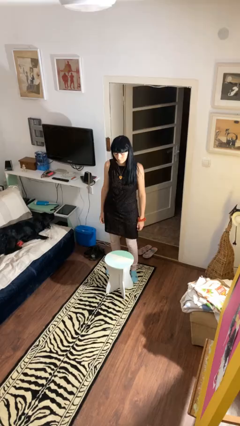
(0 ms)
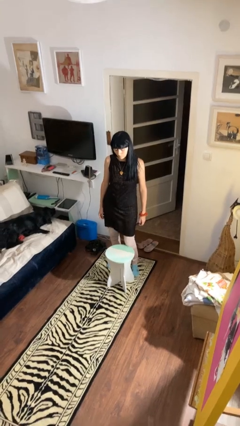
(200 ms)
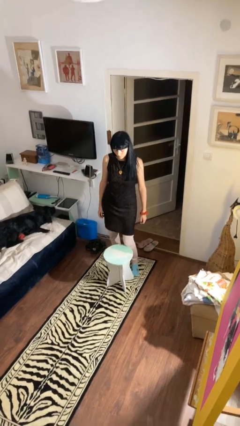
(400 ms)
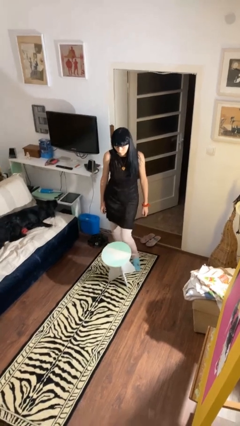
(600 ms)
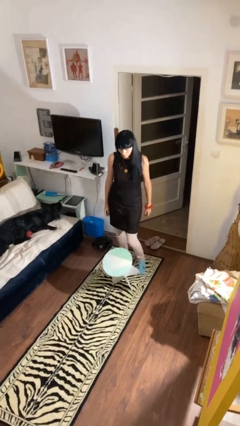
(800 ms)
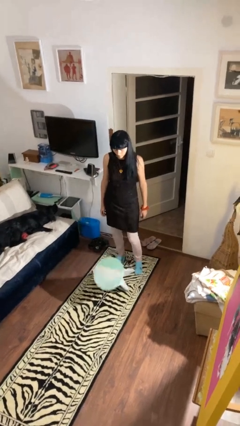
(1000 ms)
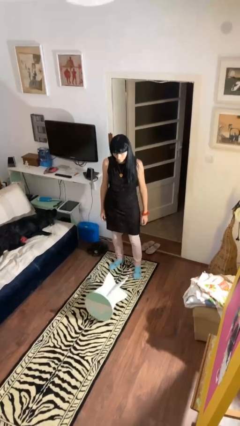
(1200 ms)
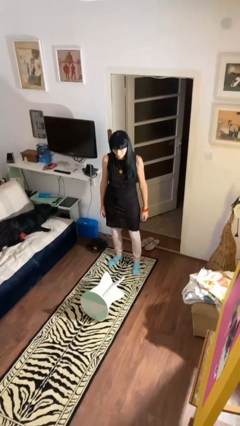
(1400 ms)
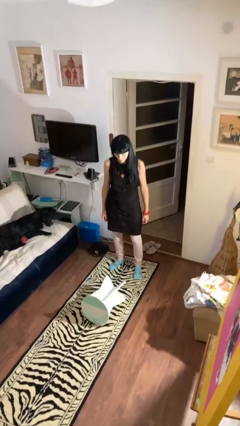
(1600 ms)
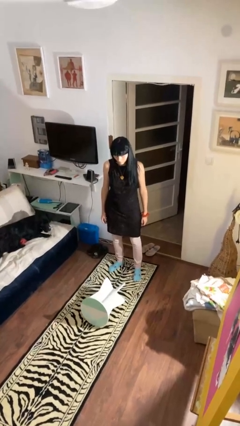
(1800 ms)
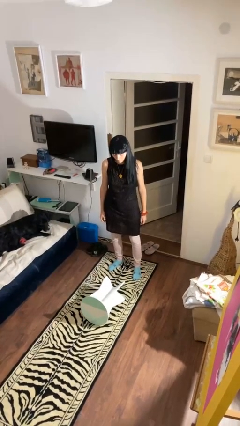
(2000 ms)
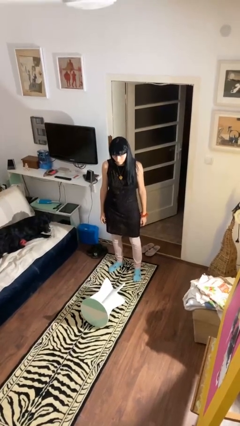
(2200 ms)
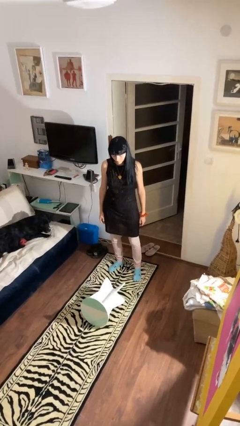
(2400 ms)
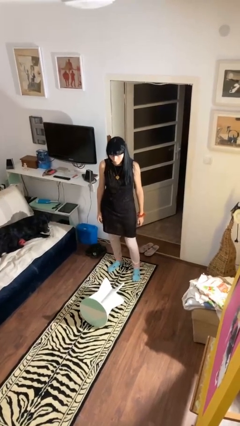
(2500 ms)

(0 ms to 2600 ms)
person knocks over furniture

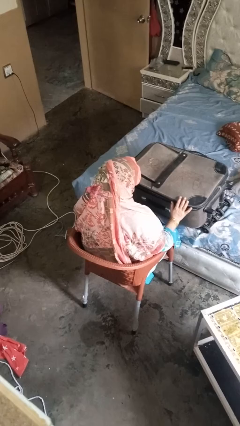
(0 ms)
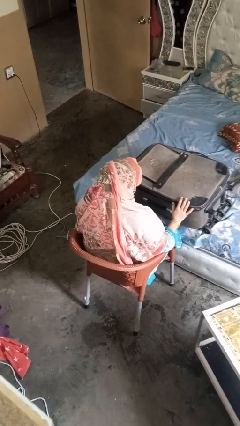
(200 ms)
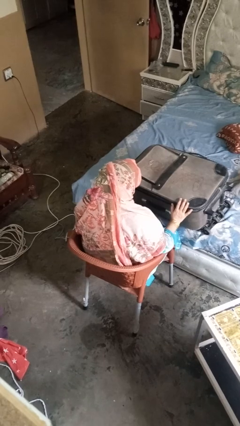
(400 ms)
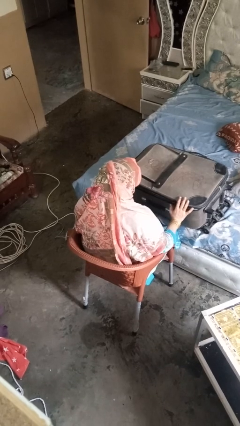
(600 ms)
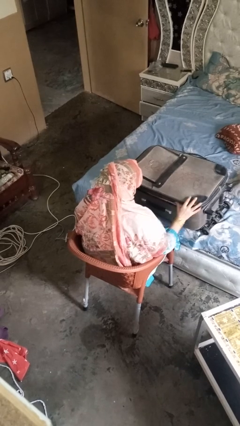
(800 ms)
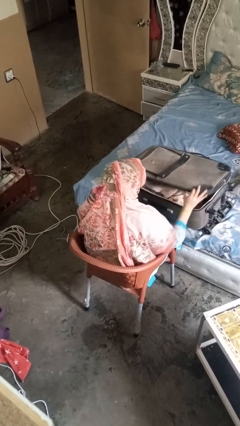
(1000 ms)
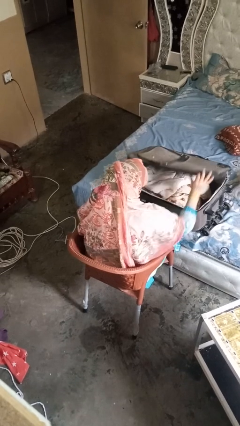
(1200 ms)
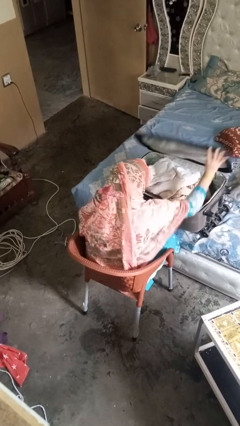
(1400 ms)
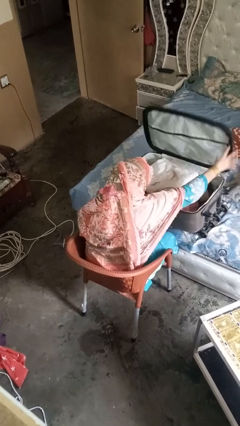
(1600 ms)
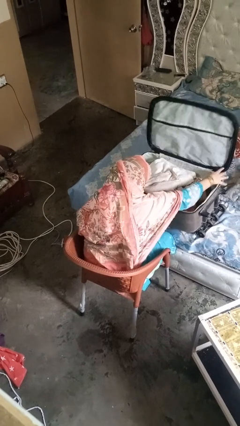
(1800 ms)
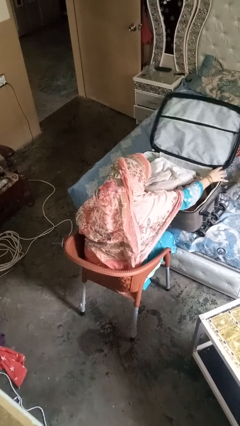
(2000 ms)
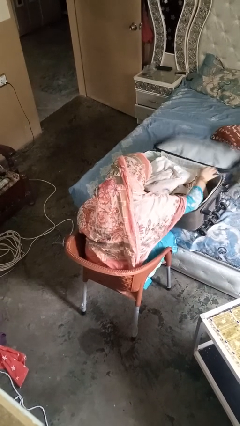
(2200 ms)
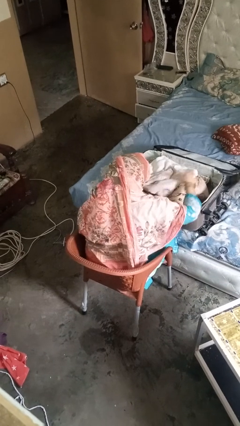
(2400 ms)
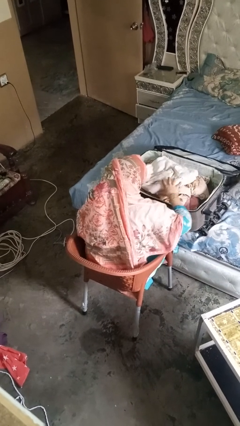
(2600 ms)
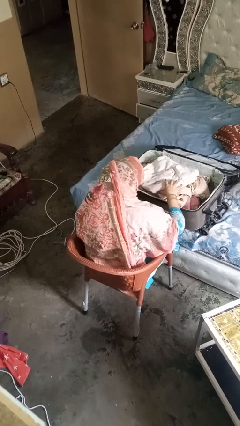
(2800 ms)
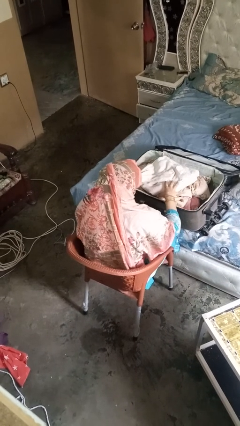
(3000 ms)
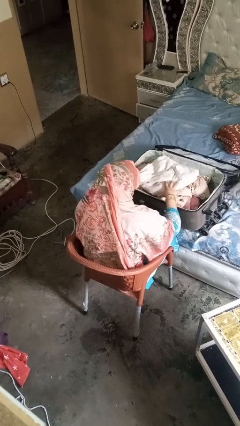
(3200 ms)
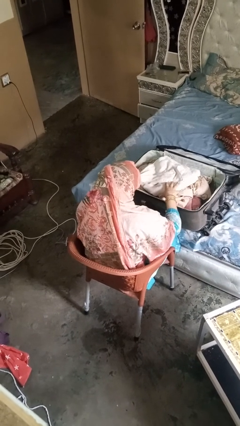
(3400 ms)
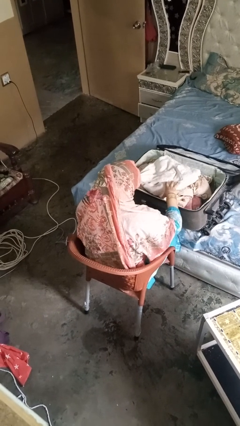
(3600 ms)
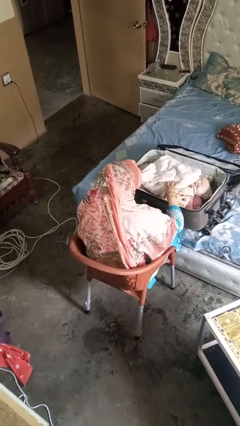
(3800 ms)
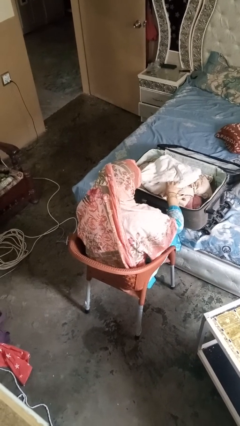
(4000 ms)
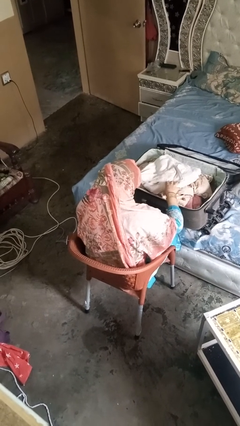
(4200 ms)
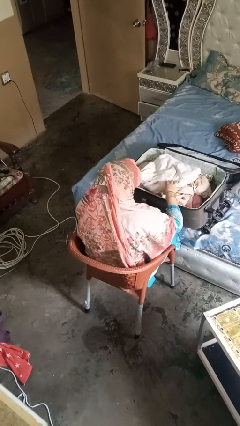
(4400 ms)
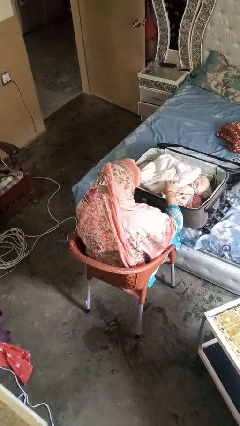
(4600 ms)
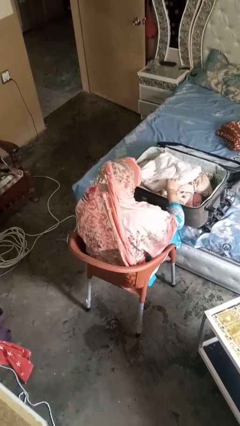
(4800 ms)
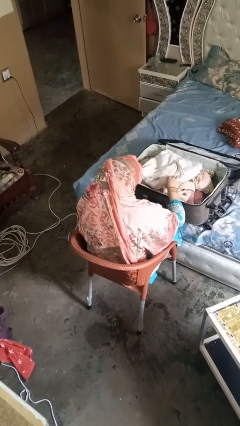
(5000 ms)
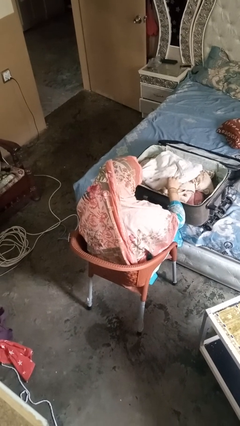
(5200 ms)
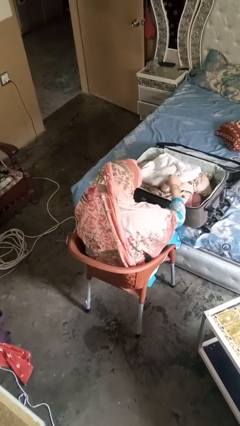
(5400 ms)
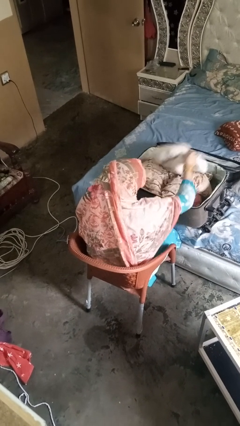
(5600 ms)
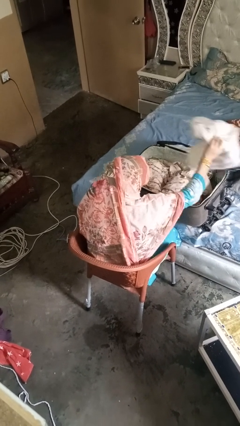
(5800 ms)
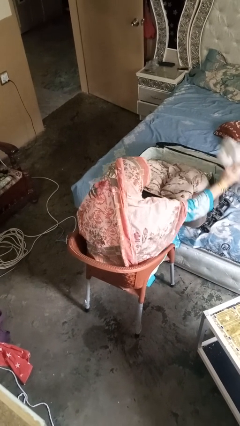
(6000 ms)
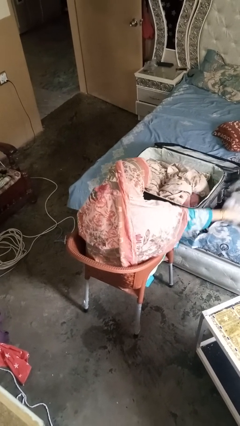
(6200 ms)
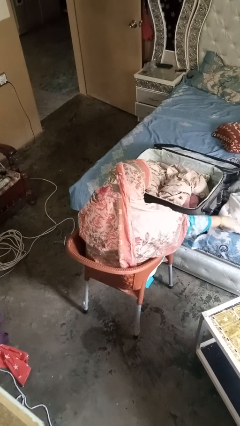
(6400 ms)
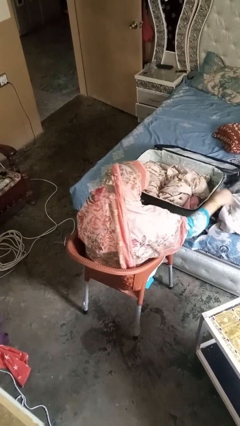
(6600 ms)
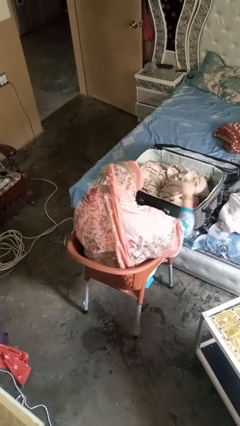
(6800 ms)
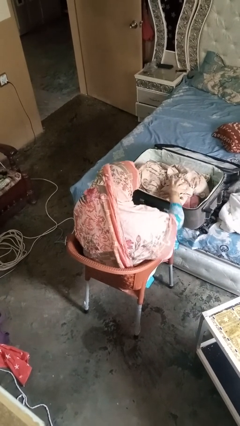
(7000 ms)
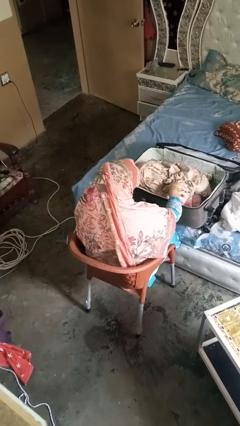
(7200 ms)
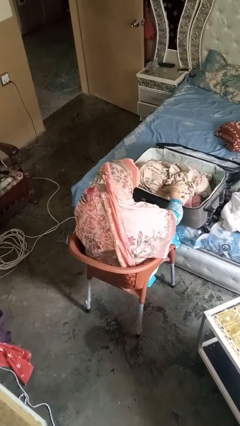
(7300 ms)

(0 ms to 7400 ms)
person unloads clothes from suitcase

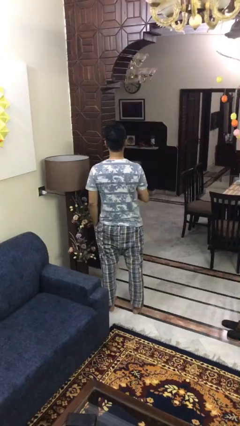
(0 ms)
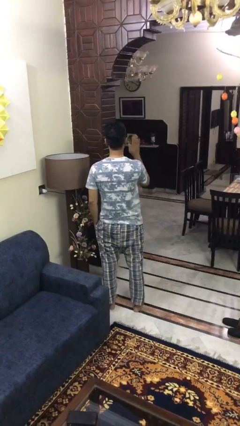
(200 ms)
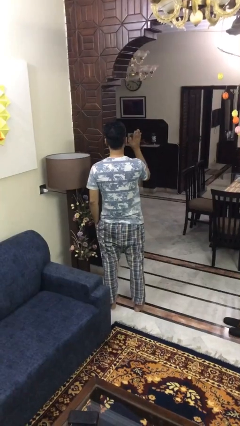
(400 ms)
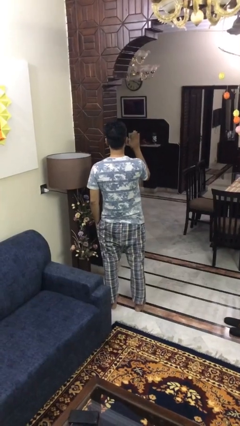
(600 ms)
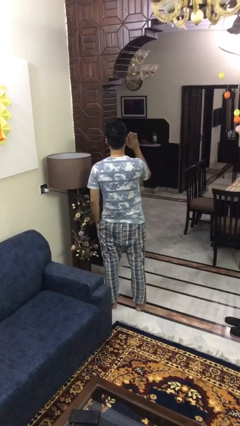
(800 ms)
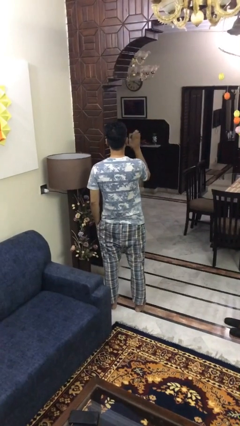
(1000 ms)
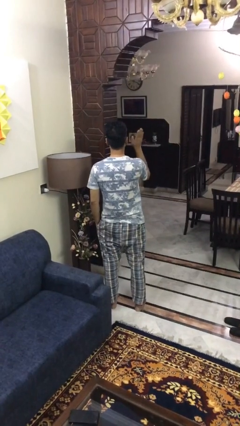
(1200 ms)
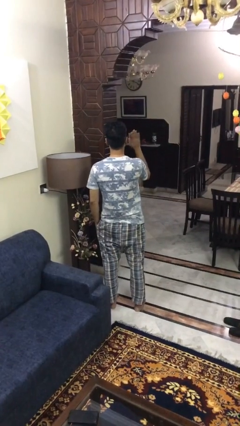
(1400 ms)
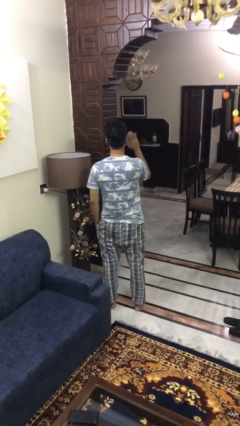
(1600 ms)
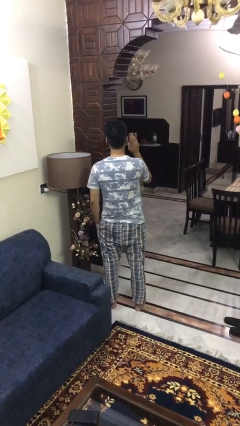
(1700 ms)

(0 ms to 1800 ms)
person waves at person

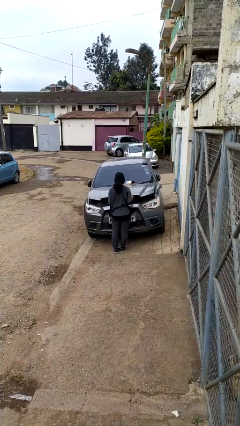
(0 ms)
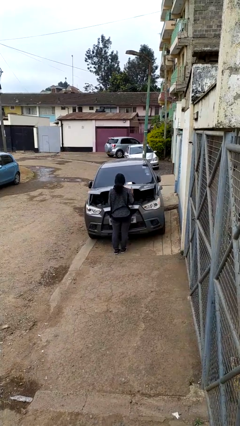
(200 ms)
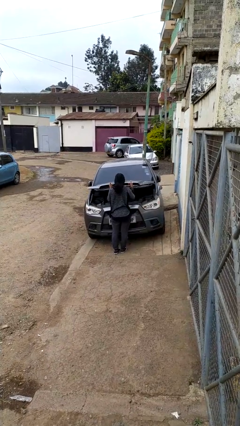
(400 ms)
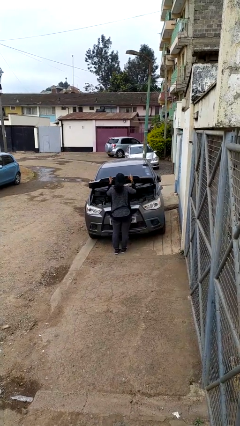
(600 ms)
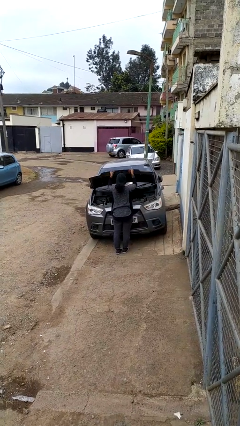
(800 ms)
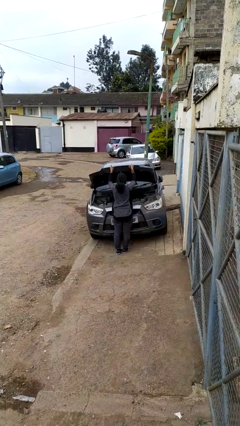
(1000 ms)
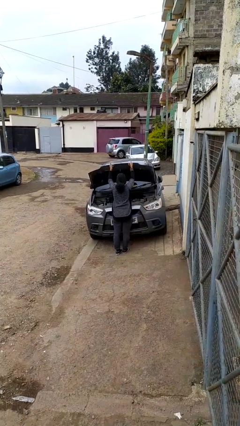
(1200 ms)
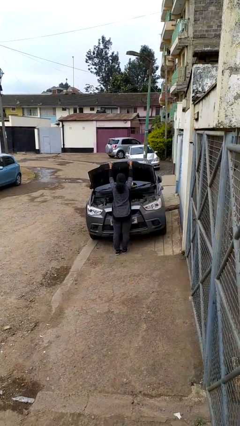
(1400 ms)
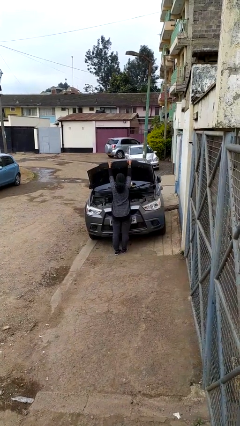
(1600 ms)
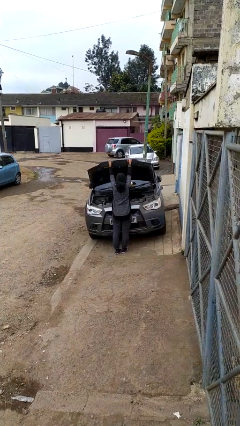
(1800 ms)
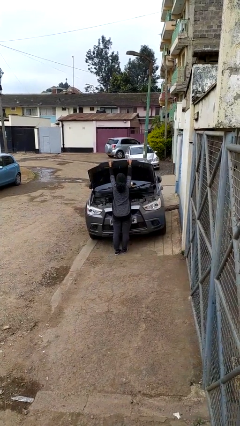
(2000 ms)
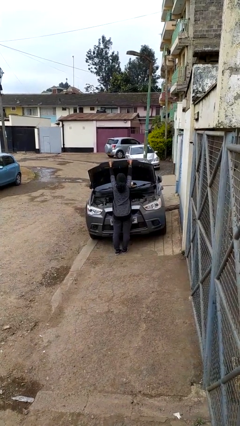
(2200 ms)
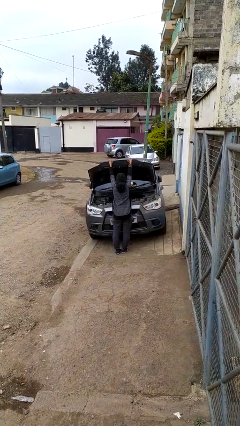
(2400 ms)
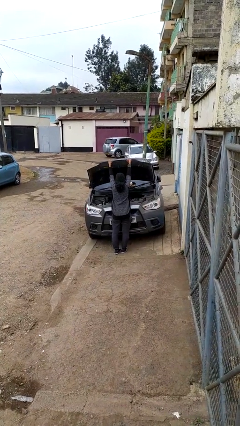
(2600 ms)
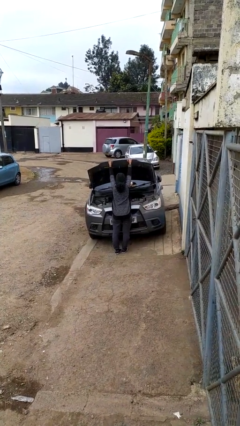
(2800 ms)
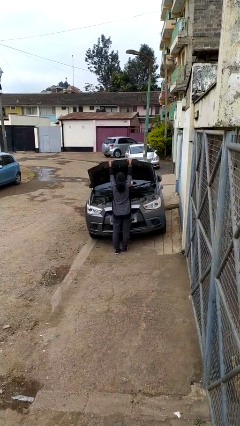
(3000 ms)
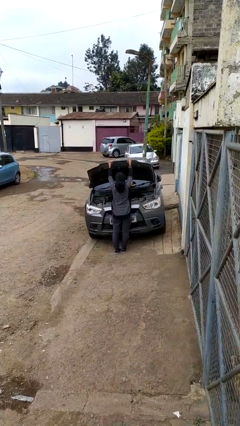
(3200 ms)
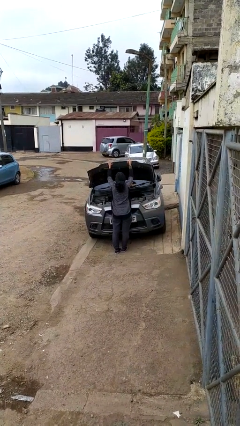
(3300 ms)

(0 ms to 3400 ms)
person opens car hood

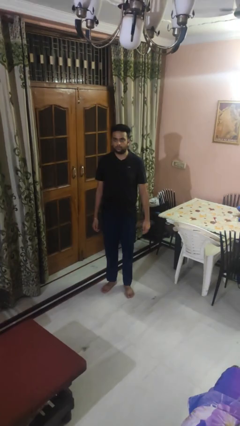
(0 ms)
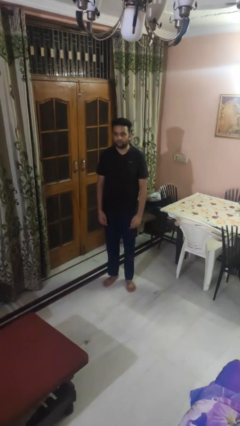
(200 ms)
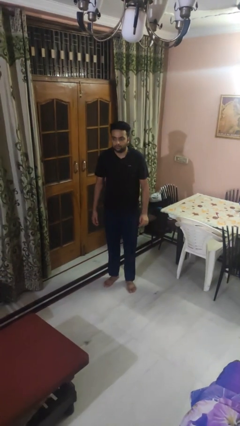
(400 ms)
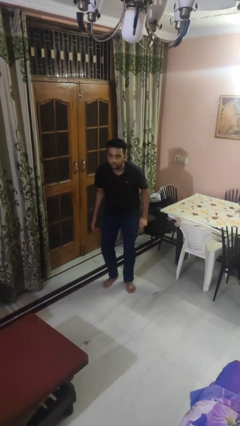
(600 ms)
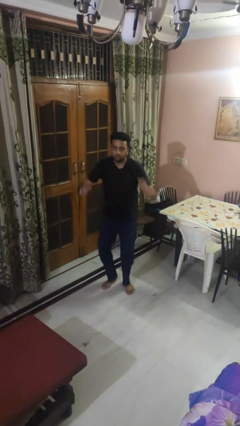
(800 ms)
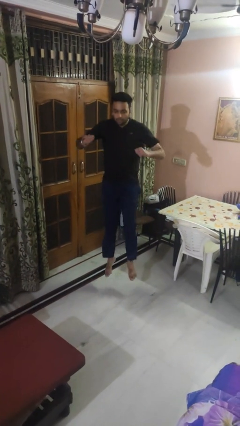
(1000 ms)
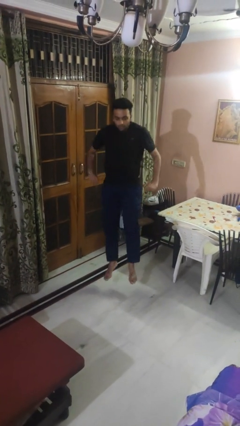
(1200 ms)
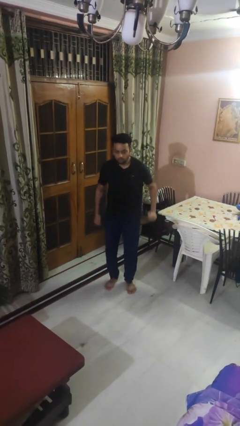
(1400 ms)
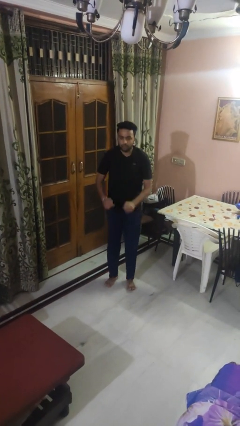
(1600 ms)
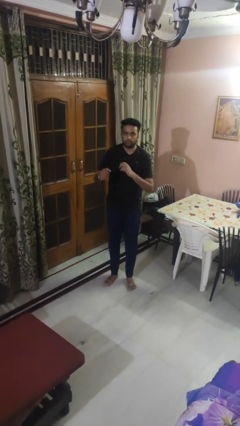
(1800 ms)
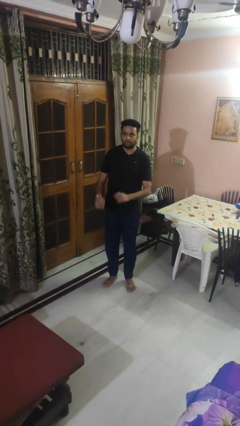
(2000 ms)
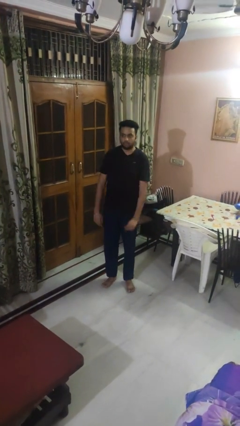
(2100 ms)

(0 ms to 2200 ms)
person jumps

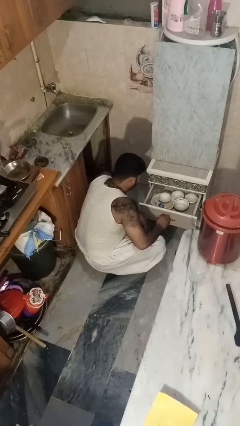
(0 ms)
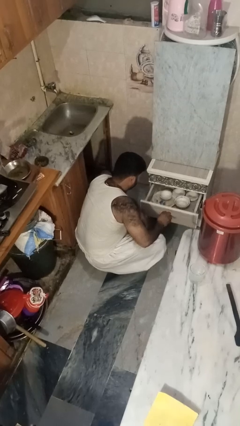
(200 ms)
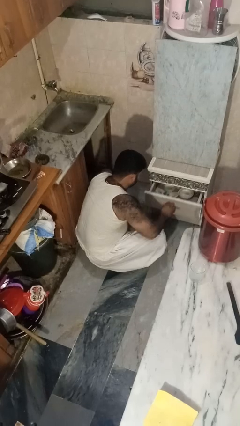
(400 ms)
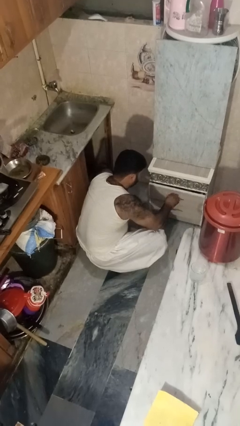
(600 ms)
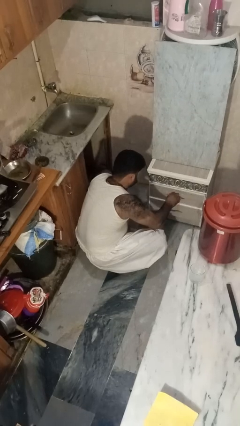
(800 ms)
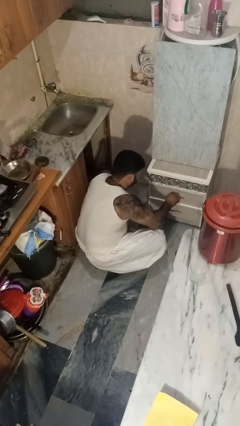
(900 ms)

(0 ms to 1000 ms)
person closes kitchen drawer
